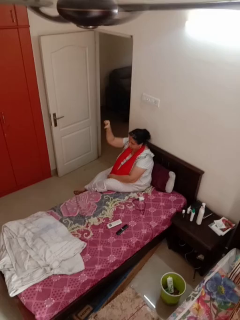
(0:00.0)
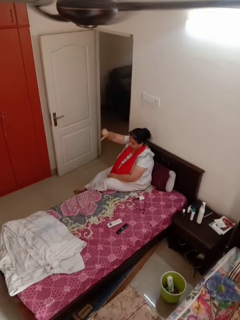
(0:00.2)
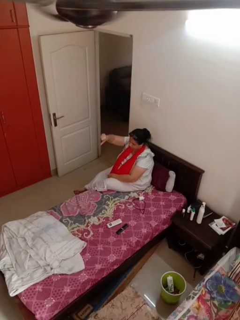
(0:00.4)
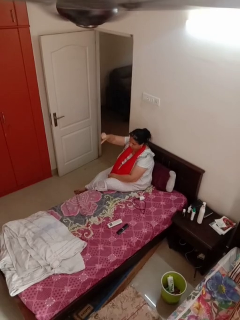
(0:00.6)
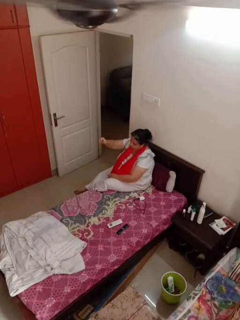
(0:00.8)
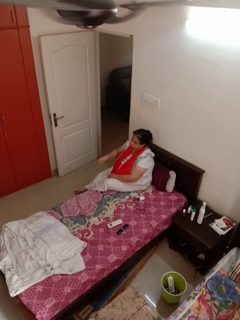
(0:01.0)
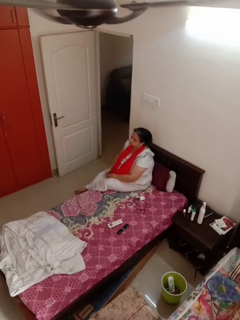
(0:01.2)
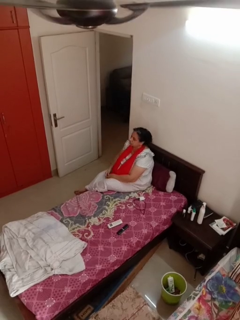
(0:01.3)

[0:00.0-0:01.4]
person gestures thumbs down

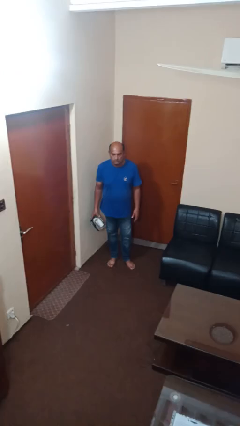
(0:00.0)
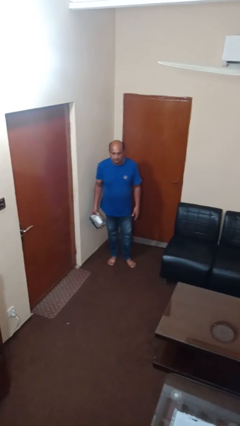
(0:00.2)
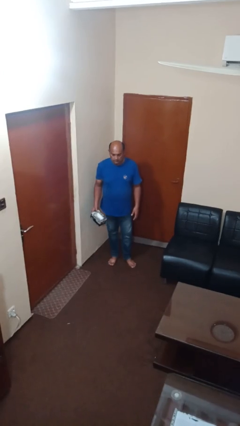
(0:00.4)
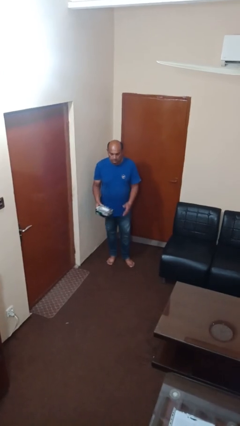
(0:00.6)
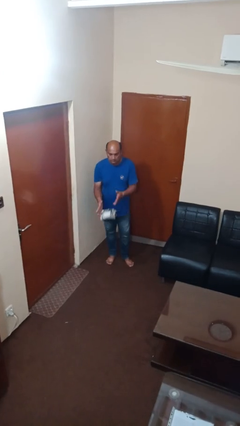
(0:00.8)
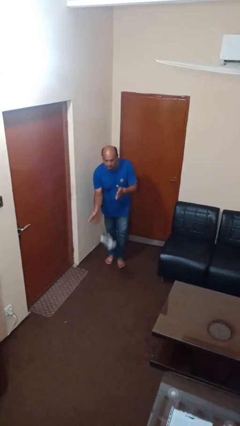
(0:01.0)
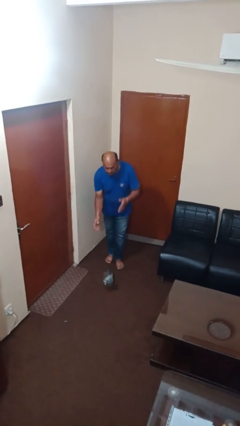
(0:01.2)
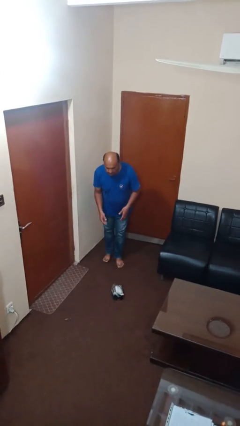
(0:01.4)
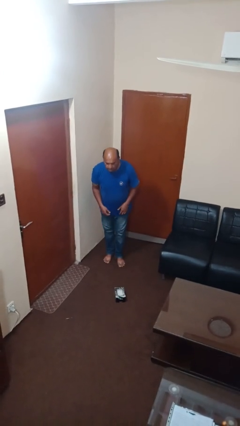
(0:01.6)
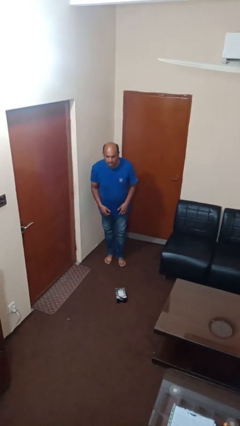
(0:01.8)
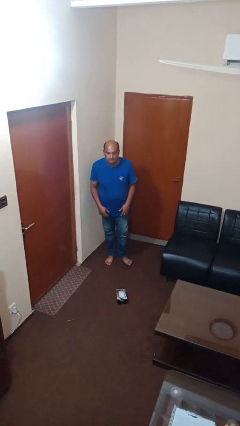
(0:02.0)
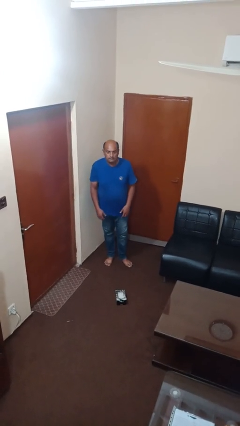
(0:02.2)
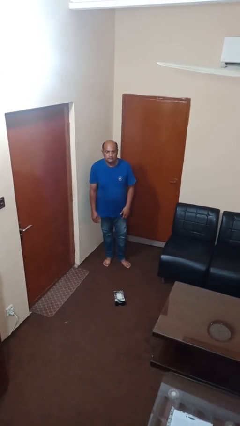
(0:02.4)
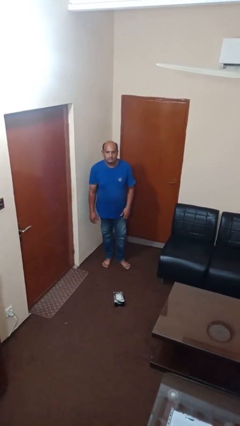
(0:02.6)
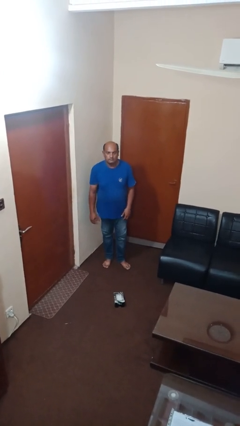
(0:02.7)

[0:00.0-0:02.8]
person drops object

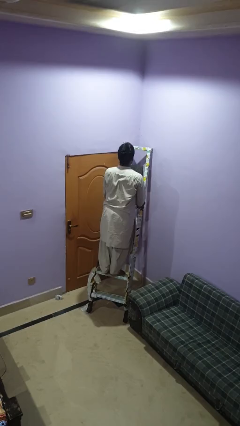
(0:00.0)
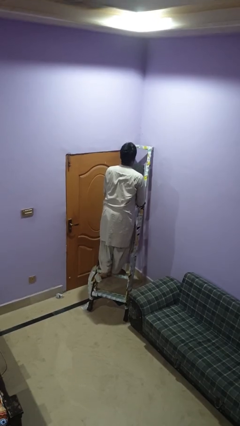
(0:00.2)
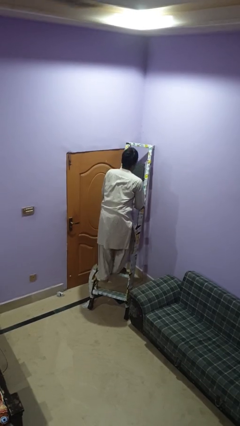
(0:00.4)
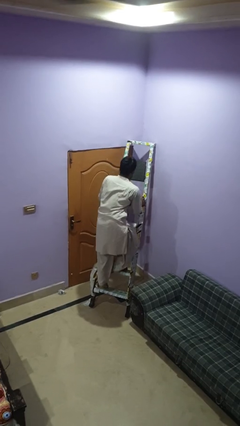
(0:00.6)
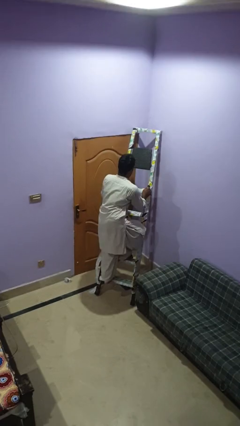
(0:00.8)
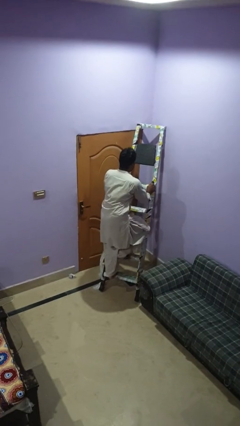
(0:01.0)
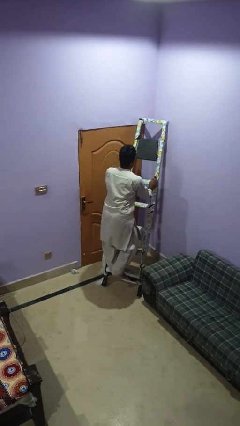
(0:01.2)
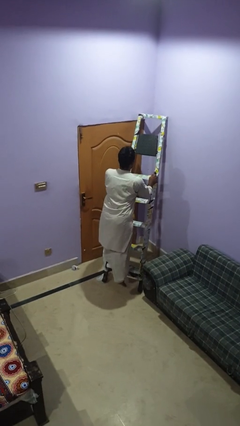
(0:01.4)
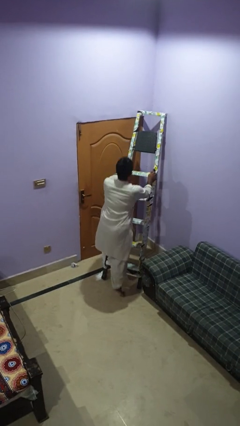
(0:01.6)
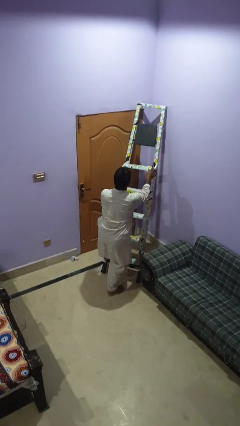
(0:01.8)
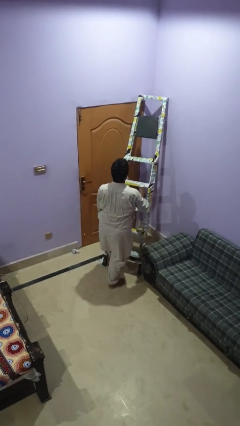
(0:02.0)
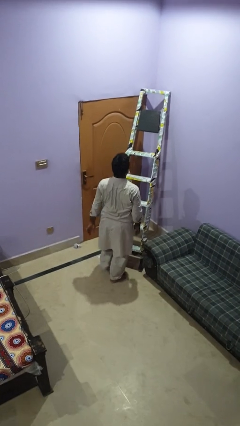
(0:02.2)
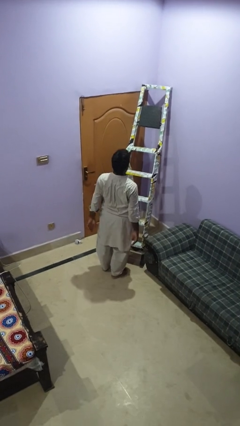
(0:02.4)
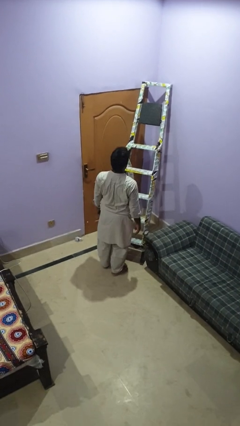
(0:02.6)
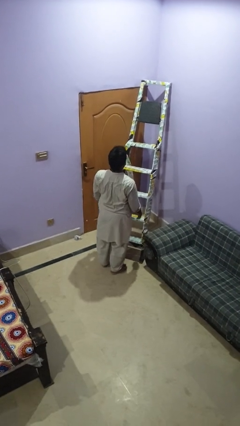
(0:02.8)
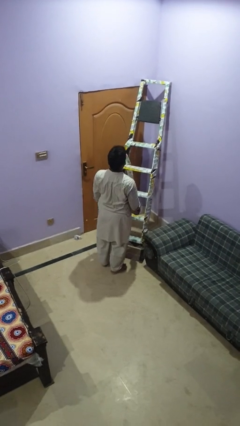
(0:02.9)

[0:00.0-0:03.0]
person climbs down ladder

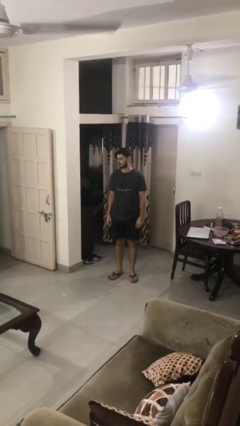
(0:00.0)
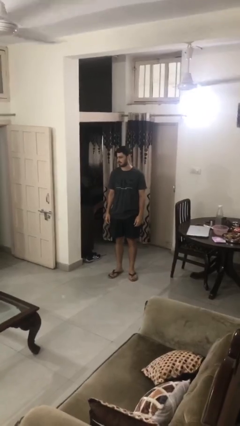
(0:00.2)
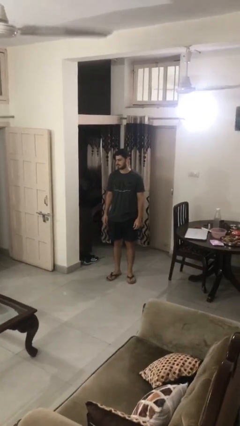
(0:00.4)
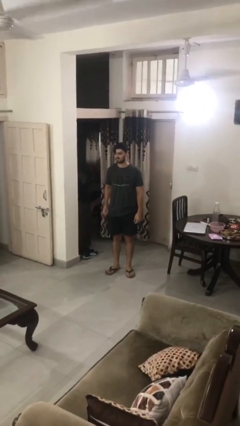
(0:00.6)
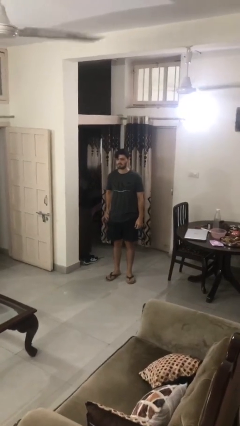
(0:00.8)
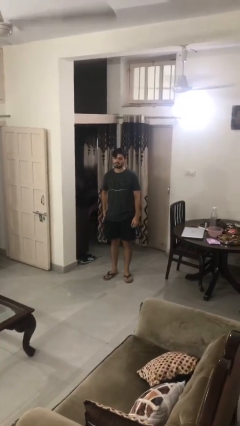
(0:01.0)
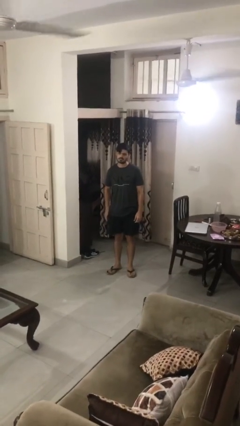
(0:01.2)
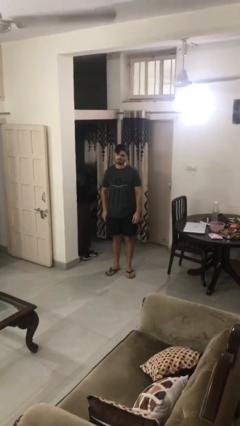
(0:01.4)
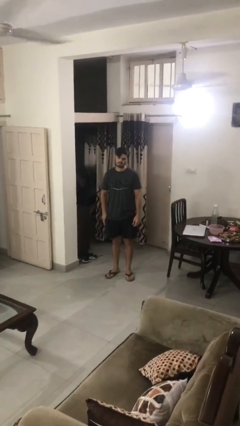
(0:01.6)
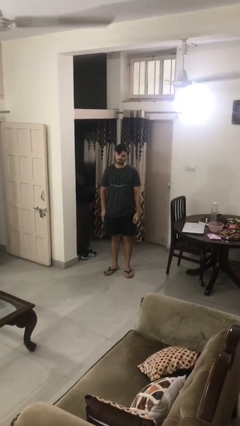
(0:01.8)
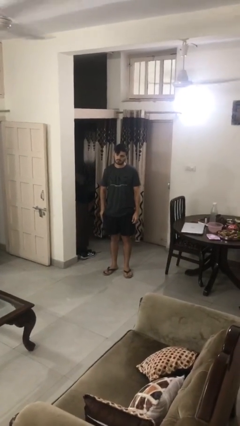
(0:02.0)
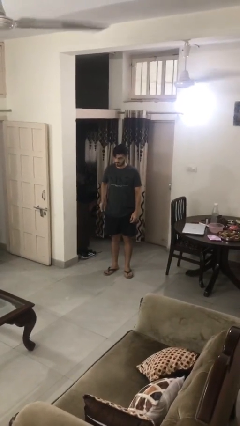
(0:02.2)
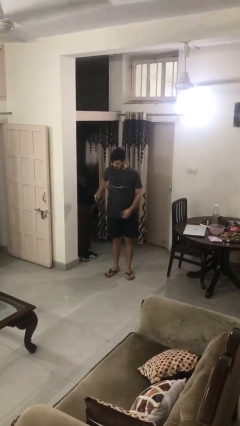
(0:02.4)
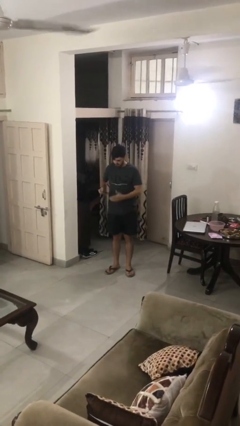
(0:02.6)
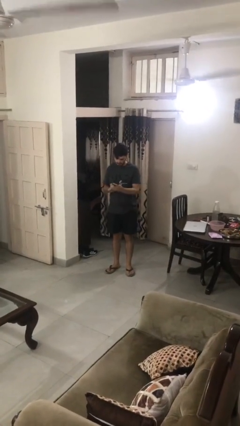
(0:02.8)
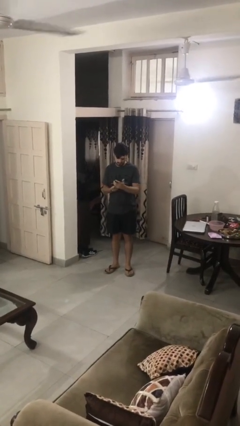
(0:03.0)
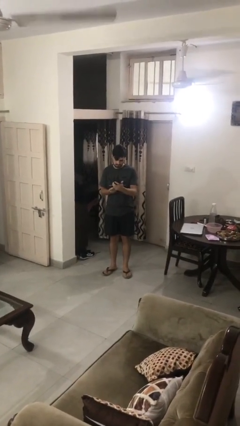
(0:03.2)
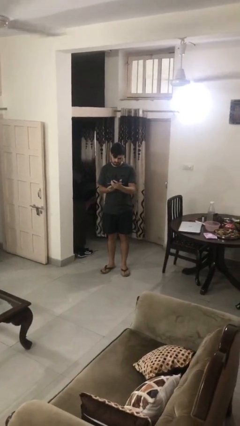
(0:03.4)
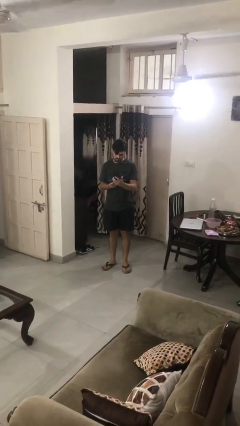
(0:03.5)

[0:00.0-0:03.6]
person takes phone from pocket

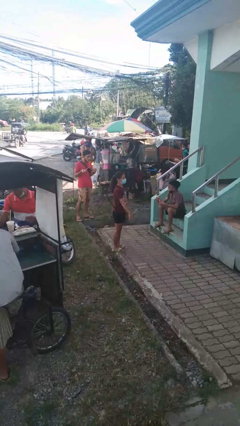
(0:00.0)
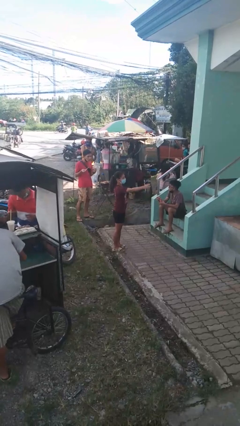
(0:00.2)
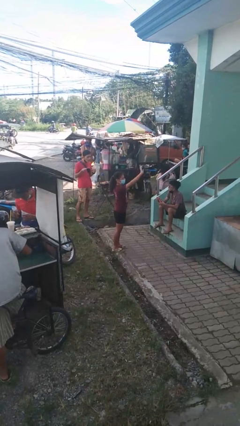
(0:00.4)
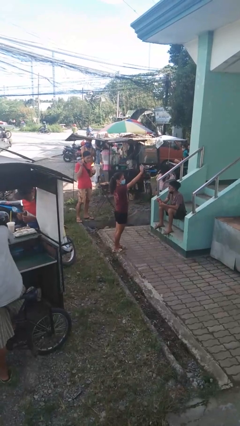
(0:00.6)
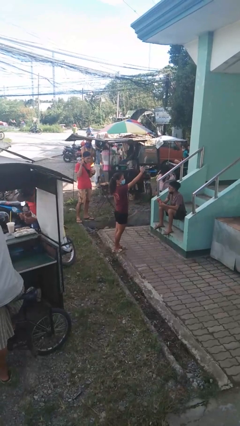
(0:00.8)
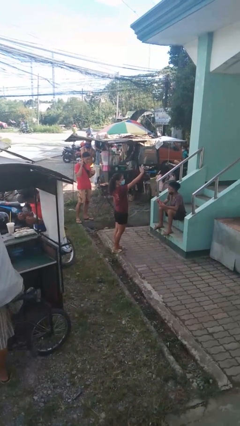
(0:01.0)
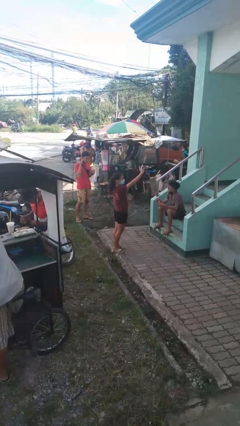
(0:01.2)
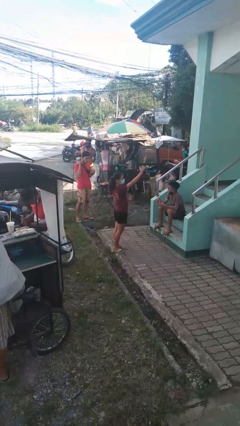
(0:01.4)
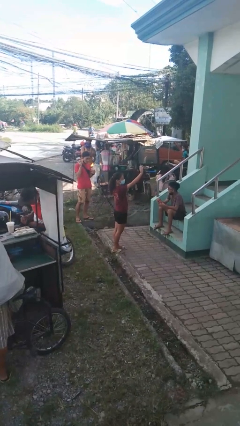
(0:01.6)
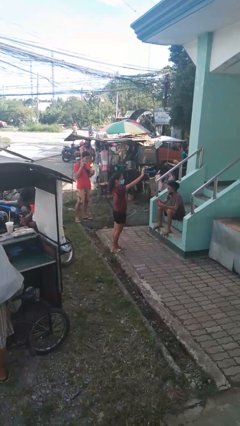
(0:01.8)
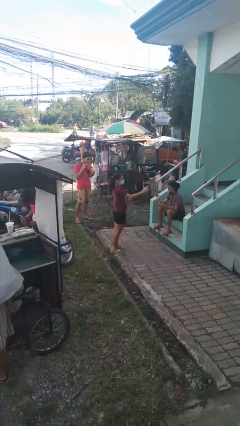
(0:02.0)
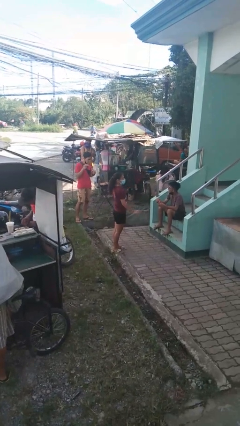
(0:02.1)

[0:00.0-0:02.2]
person waves at person

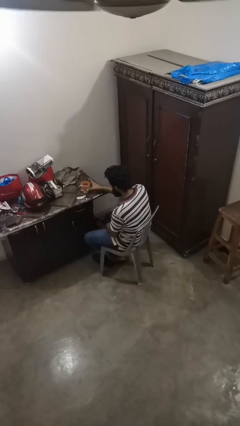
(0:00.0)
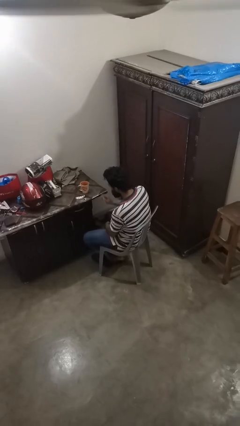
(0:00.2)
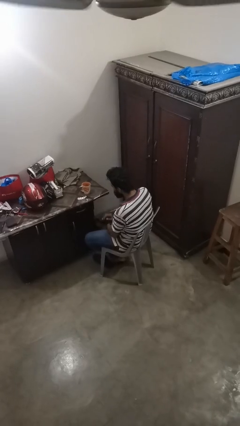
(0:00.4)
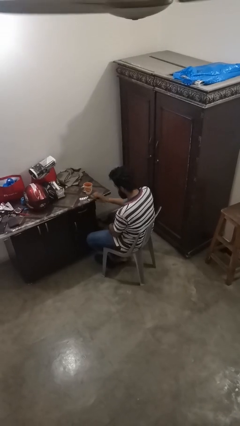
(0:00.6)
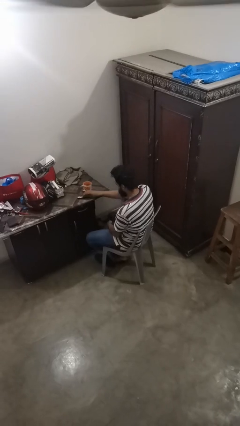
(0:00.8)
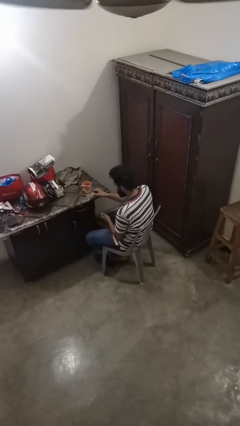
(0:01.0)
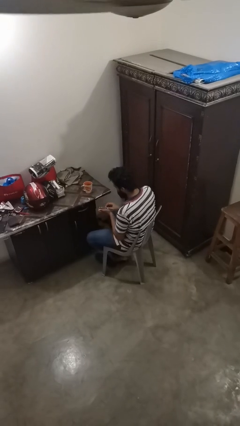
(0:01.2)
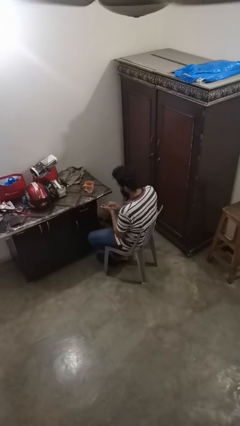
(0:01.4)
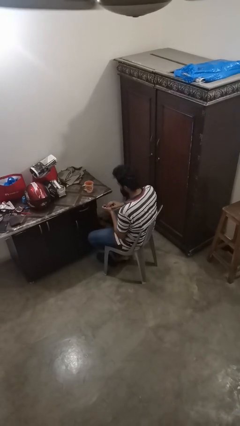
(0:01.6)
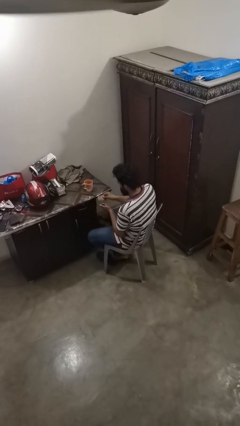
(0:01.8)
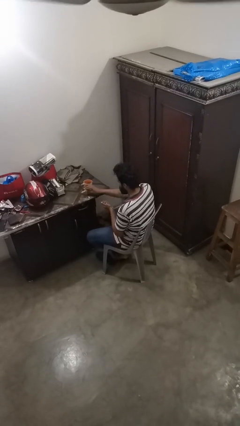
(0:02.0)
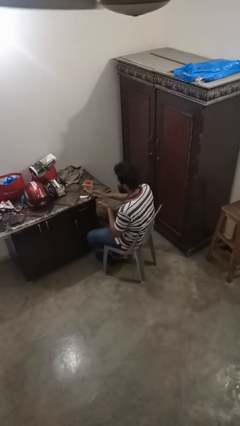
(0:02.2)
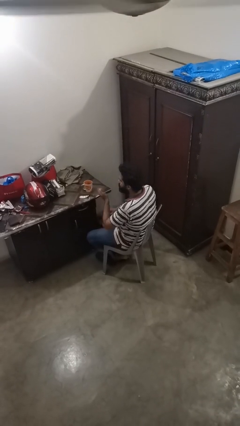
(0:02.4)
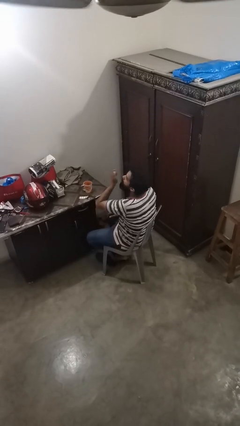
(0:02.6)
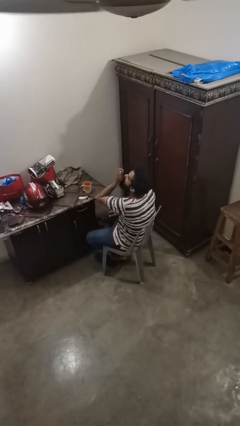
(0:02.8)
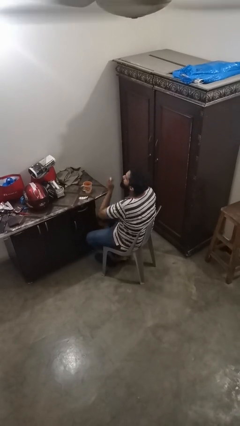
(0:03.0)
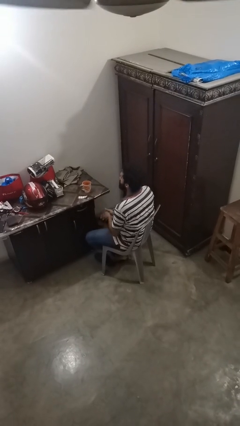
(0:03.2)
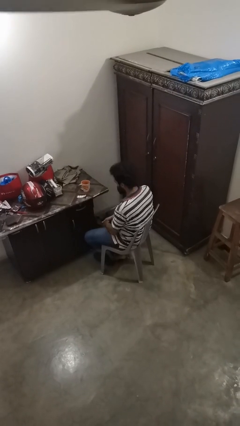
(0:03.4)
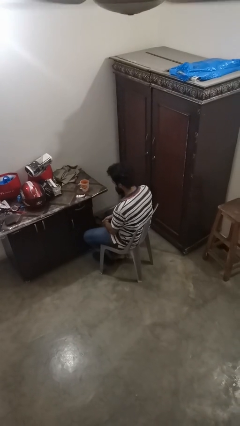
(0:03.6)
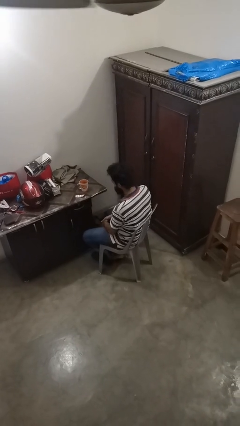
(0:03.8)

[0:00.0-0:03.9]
person takes medicine pills

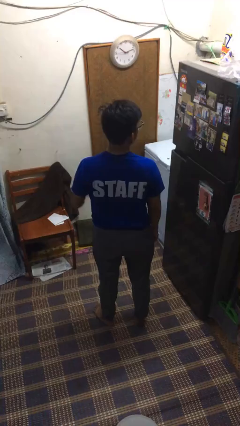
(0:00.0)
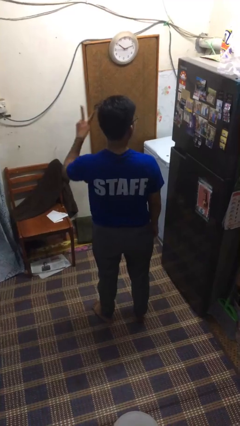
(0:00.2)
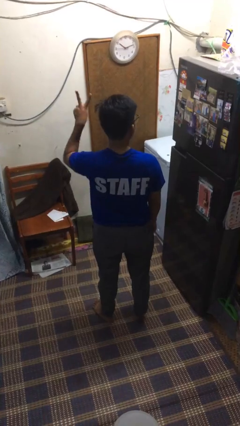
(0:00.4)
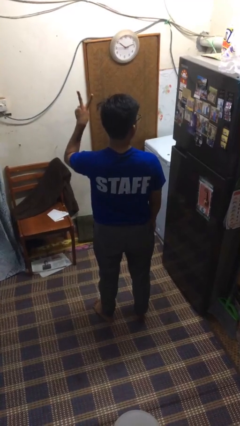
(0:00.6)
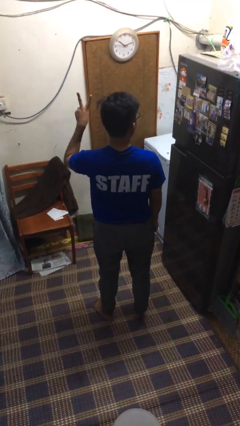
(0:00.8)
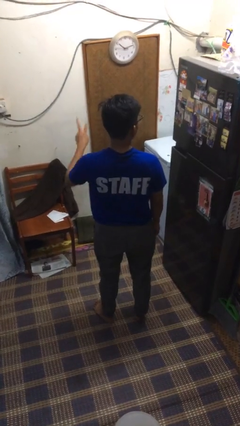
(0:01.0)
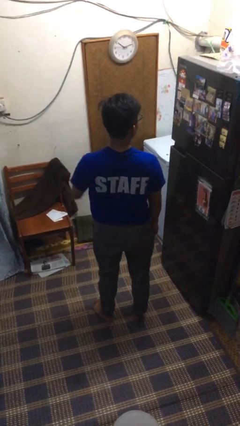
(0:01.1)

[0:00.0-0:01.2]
person gestures peace
